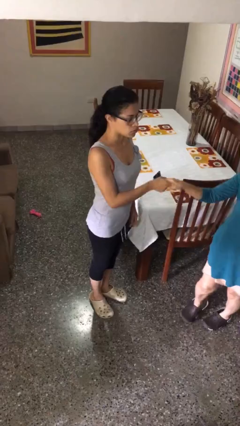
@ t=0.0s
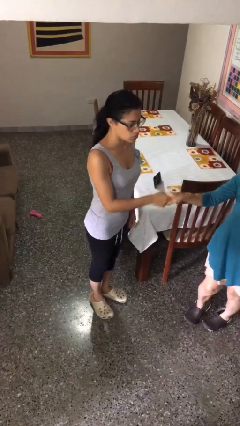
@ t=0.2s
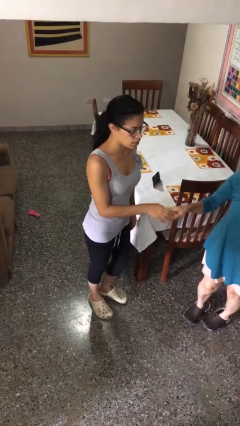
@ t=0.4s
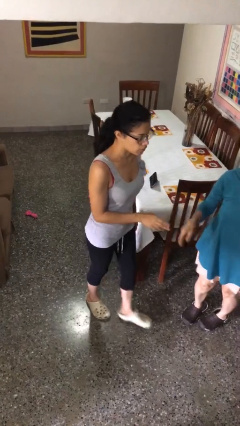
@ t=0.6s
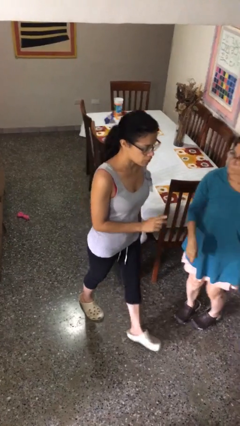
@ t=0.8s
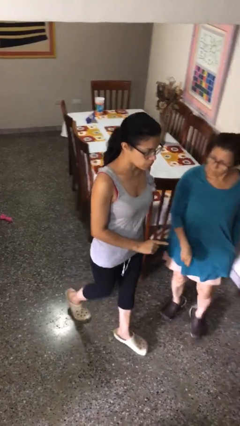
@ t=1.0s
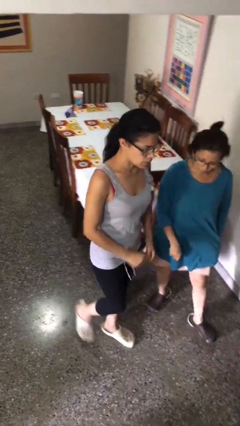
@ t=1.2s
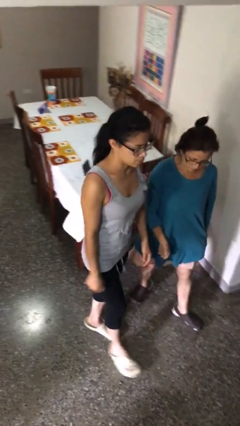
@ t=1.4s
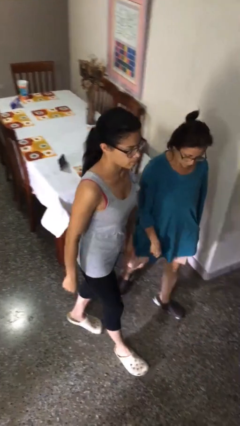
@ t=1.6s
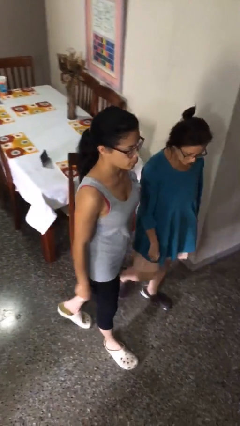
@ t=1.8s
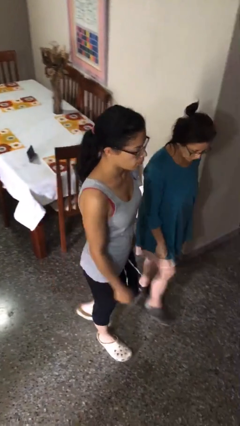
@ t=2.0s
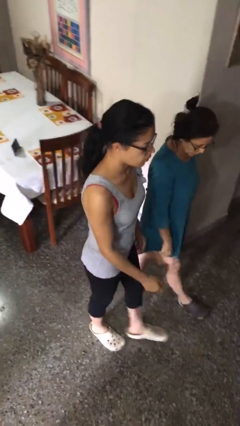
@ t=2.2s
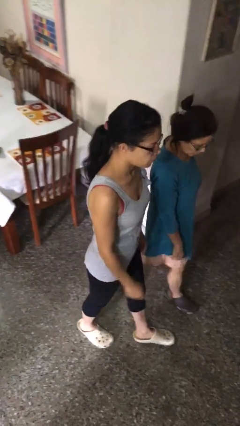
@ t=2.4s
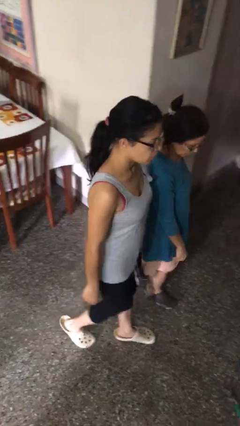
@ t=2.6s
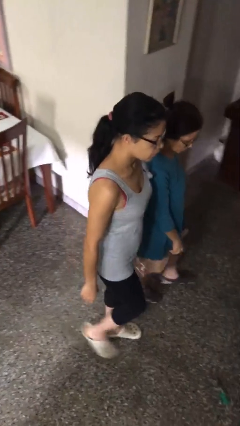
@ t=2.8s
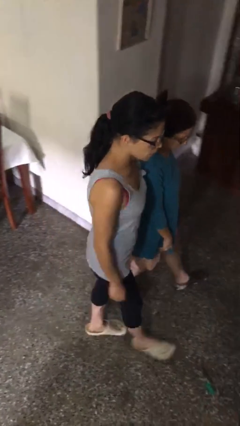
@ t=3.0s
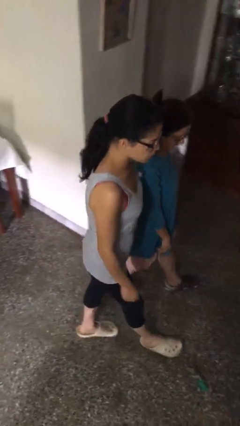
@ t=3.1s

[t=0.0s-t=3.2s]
person talks to person

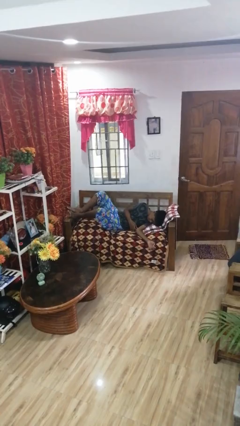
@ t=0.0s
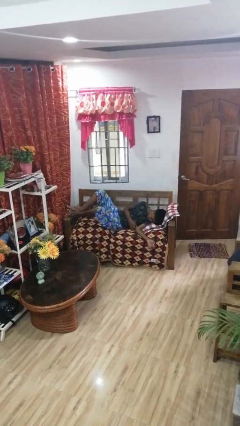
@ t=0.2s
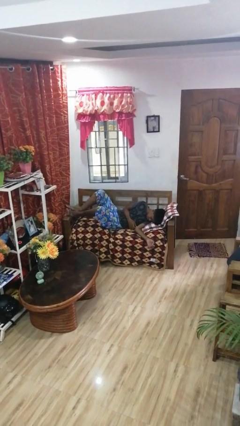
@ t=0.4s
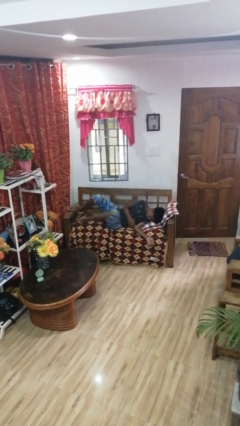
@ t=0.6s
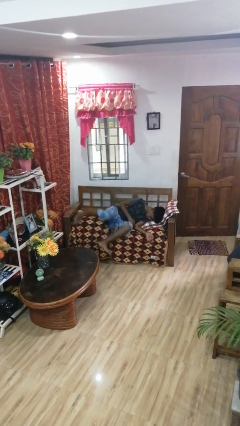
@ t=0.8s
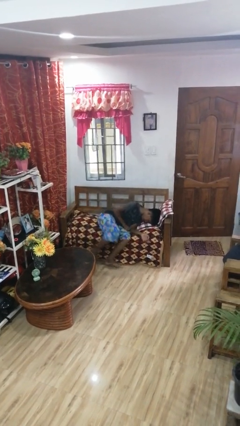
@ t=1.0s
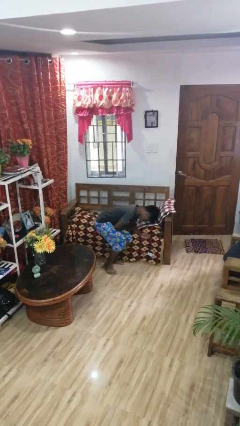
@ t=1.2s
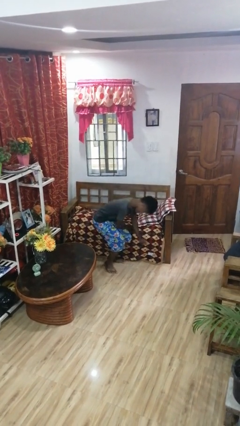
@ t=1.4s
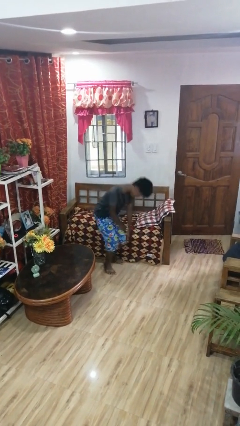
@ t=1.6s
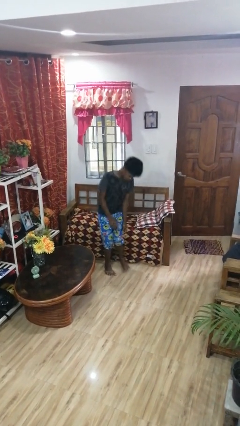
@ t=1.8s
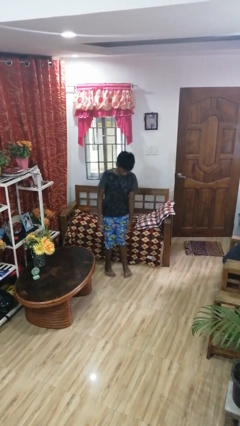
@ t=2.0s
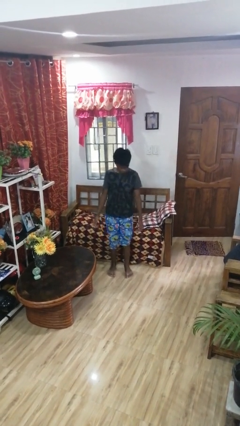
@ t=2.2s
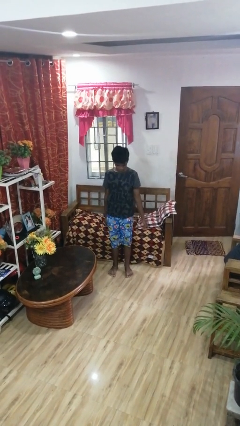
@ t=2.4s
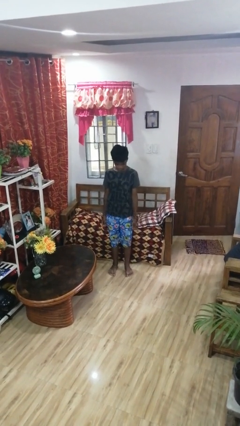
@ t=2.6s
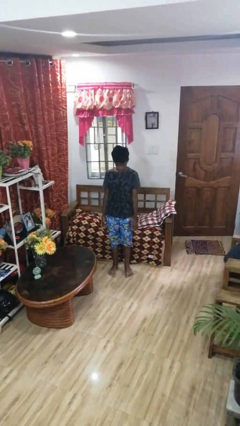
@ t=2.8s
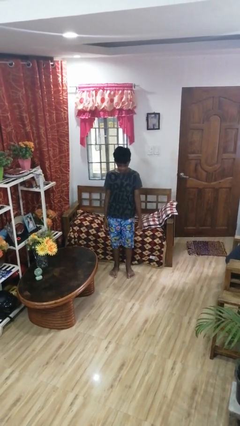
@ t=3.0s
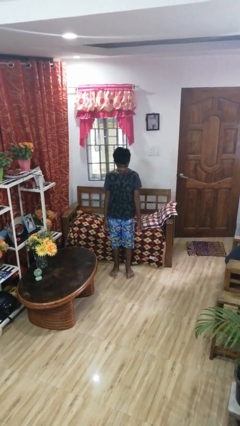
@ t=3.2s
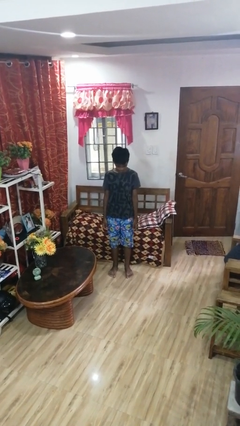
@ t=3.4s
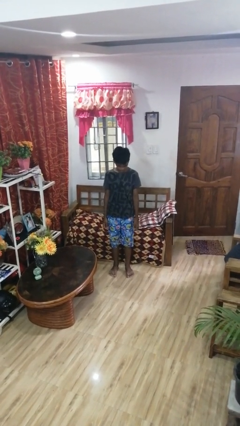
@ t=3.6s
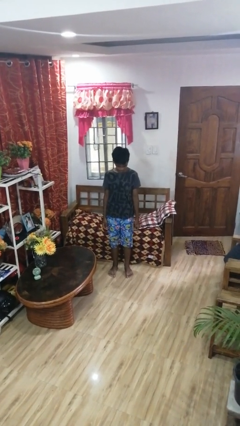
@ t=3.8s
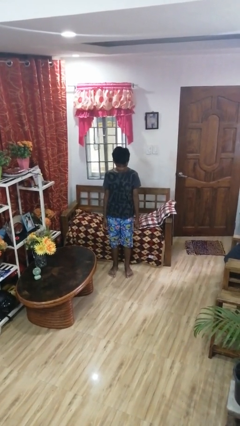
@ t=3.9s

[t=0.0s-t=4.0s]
person stands up

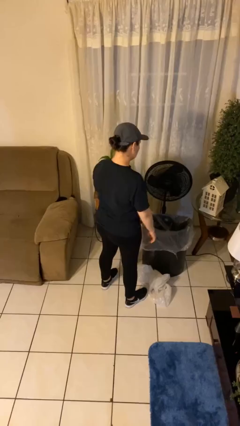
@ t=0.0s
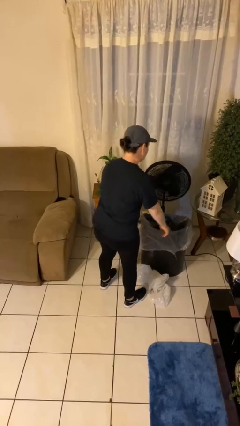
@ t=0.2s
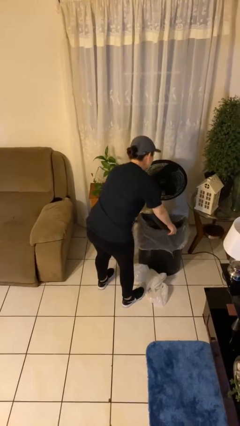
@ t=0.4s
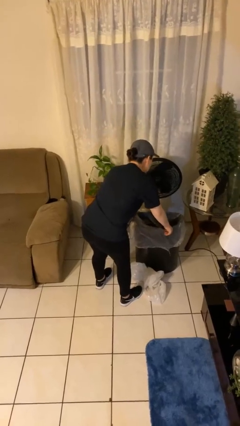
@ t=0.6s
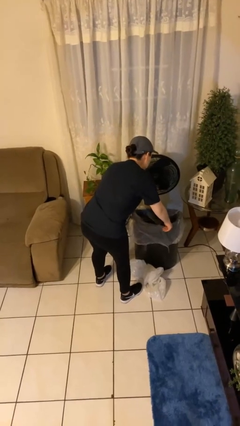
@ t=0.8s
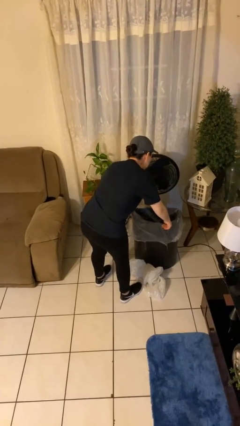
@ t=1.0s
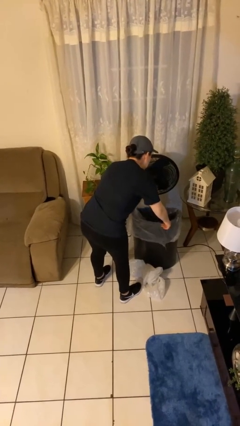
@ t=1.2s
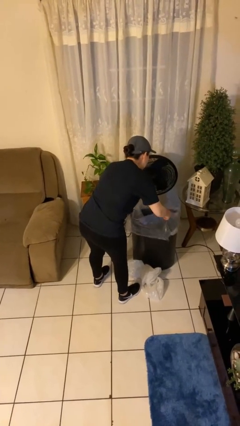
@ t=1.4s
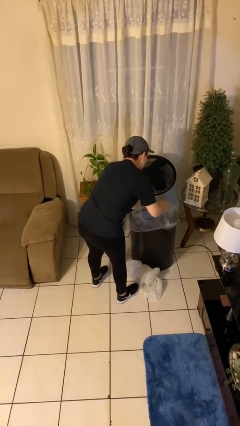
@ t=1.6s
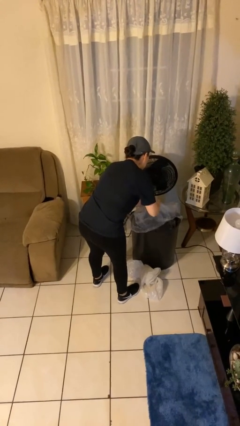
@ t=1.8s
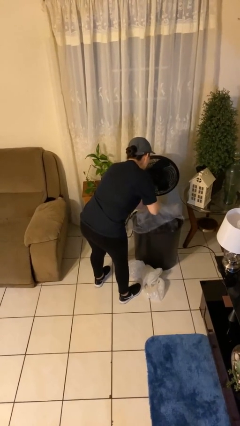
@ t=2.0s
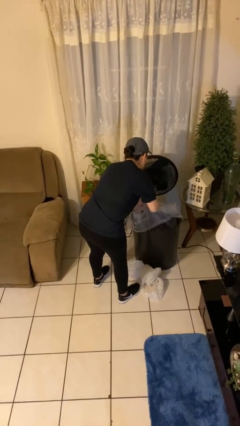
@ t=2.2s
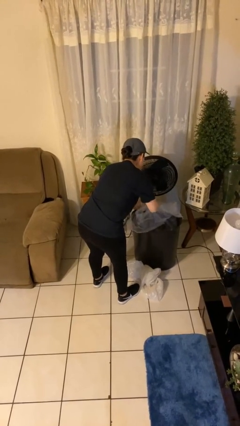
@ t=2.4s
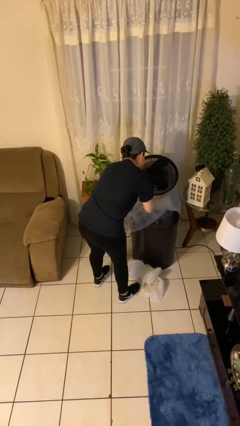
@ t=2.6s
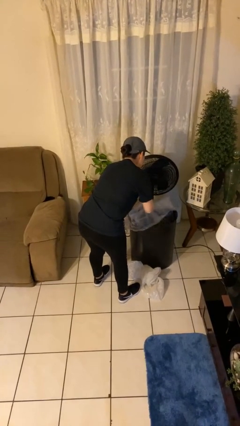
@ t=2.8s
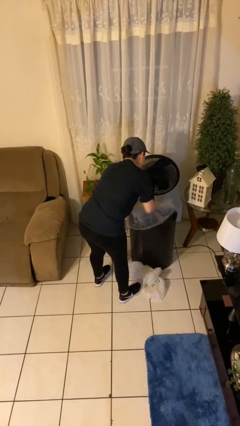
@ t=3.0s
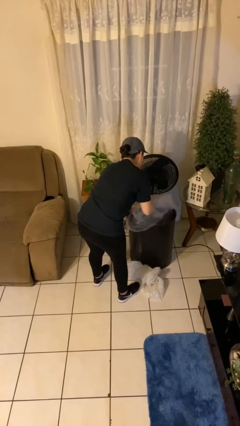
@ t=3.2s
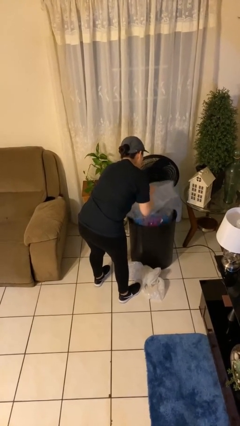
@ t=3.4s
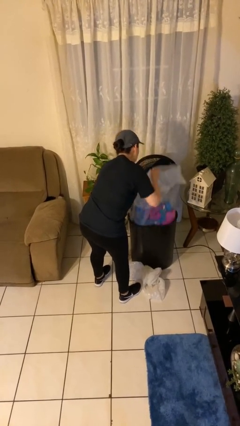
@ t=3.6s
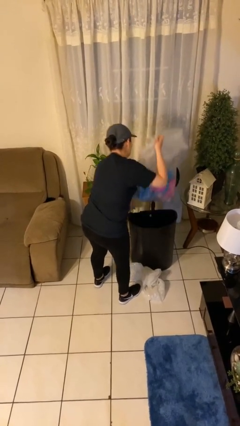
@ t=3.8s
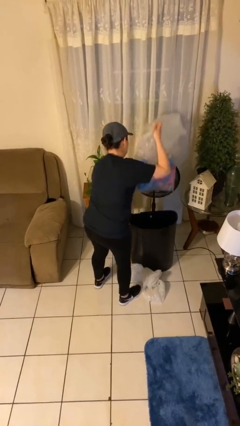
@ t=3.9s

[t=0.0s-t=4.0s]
person removes trashbag from trashcan

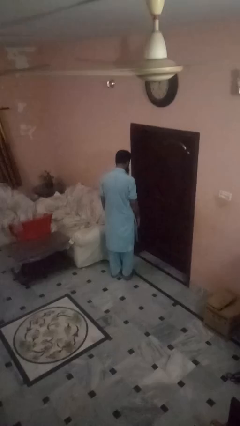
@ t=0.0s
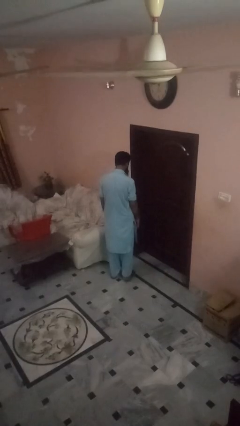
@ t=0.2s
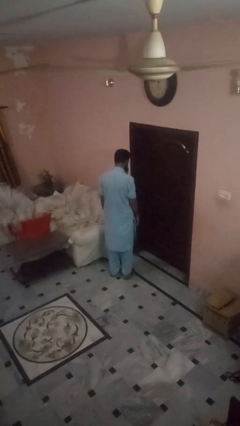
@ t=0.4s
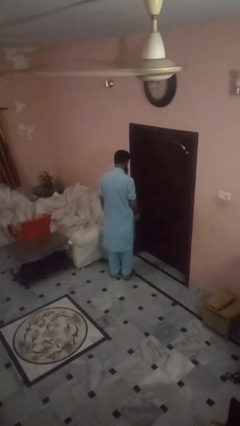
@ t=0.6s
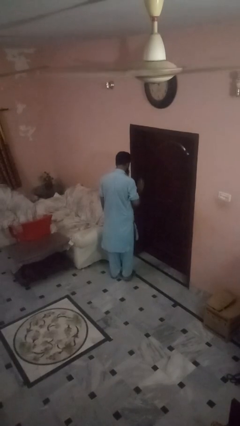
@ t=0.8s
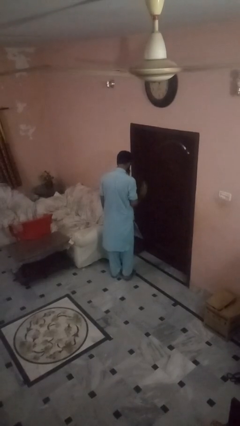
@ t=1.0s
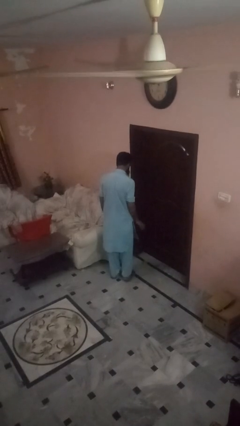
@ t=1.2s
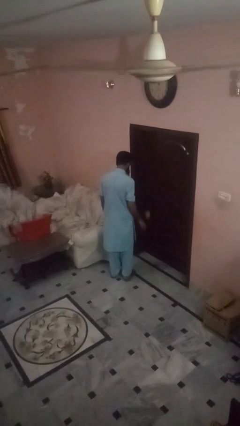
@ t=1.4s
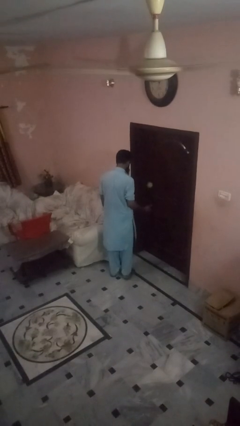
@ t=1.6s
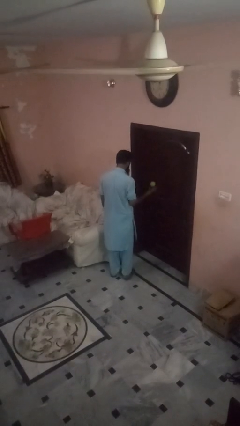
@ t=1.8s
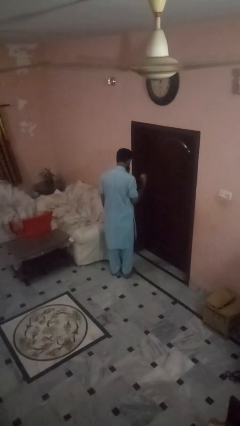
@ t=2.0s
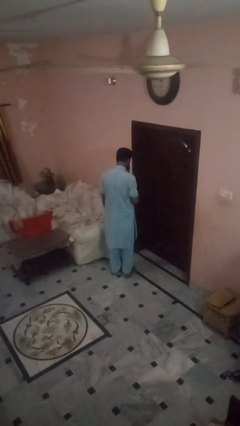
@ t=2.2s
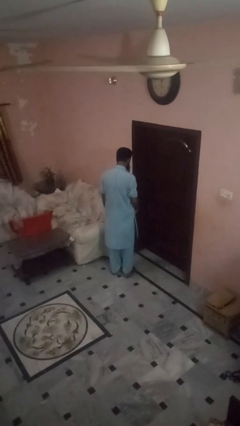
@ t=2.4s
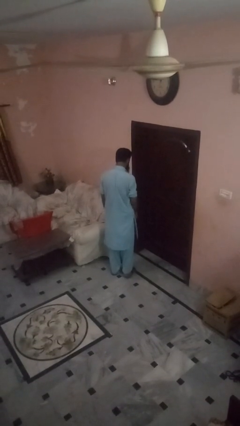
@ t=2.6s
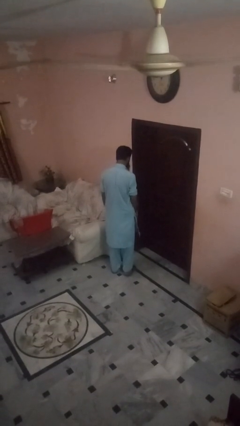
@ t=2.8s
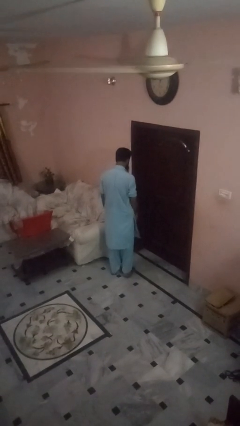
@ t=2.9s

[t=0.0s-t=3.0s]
person bounces ball on floor

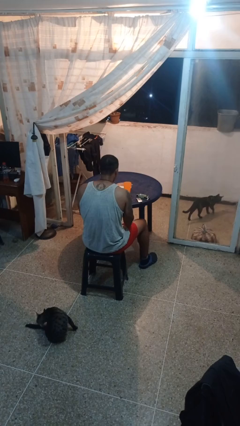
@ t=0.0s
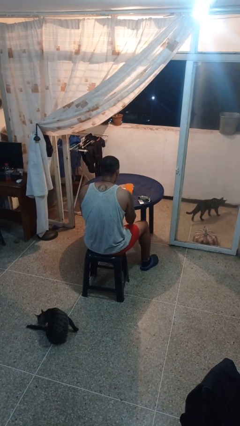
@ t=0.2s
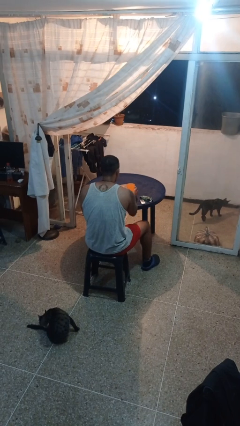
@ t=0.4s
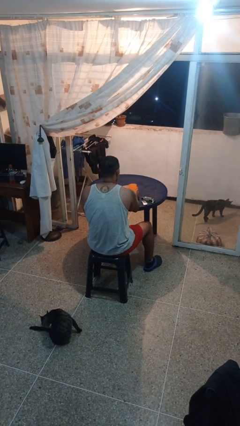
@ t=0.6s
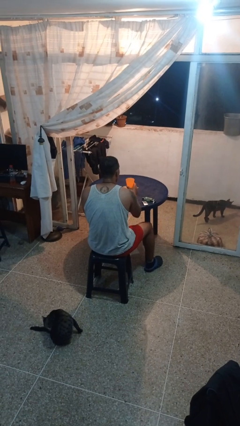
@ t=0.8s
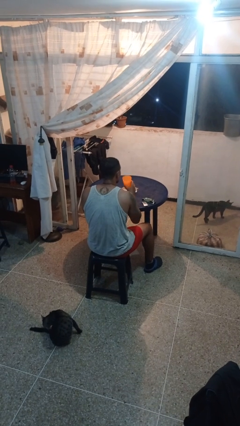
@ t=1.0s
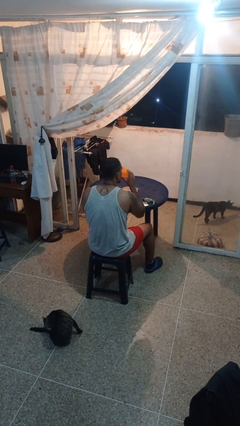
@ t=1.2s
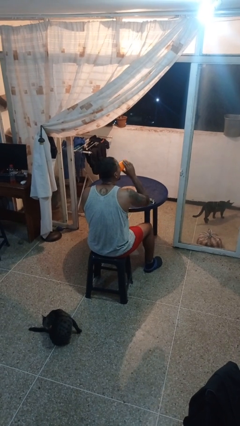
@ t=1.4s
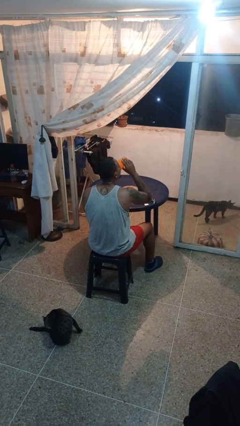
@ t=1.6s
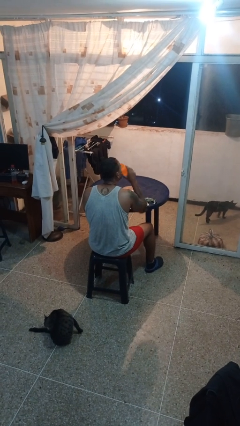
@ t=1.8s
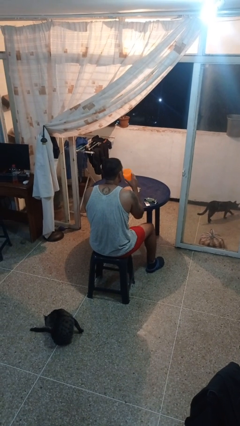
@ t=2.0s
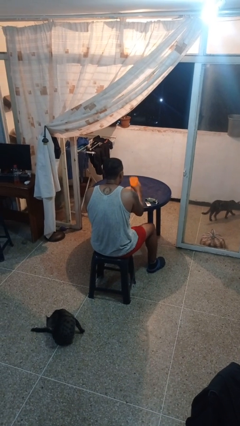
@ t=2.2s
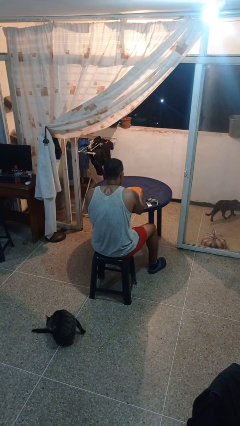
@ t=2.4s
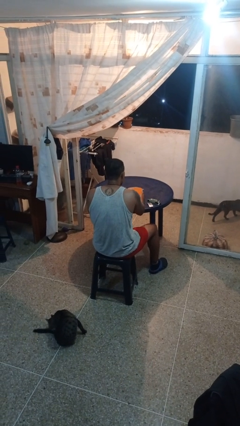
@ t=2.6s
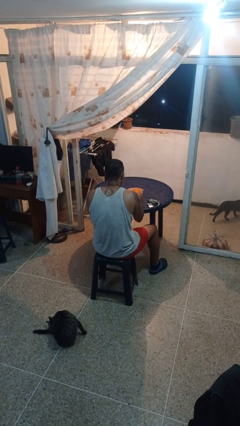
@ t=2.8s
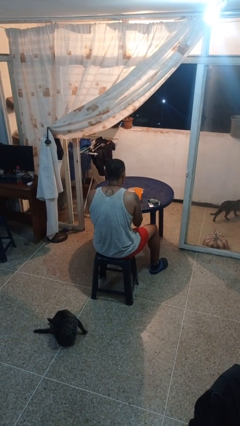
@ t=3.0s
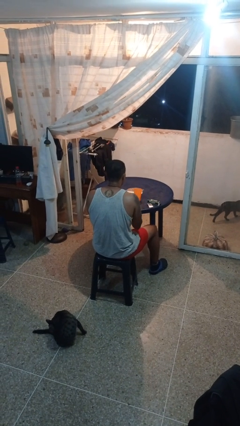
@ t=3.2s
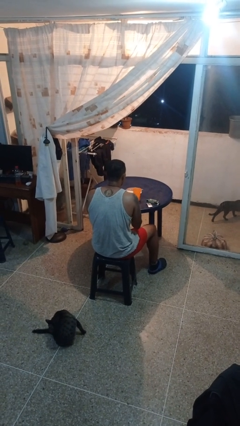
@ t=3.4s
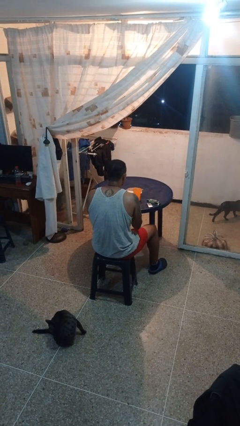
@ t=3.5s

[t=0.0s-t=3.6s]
person drinks from cup
